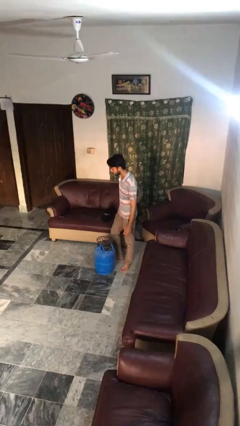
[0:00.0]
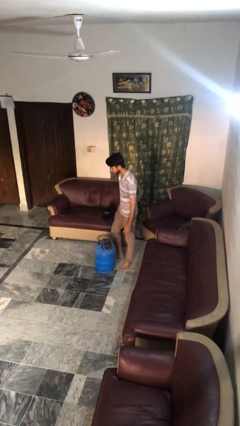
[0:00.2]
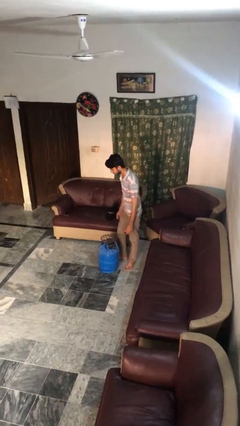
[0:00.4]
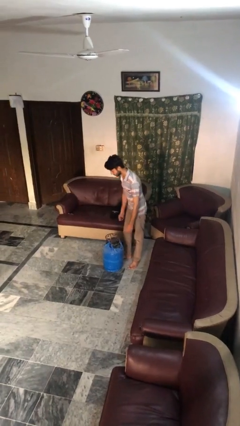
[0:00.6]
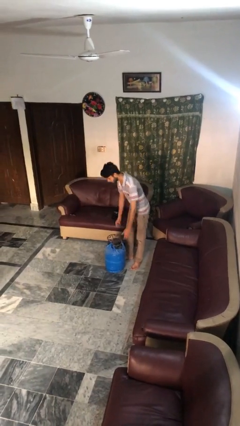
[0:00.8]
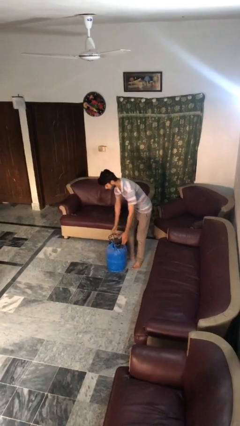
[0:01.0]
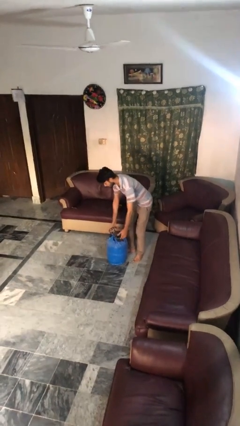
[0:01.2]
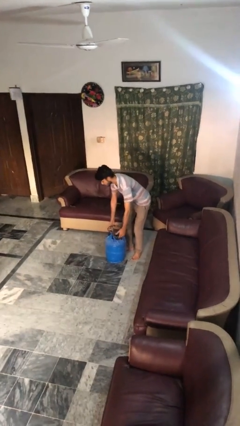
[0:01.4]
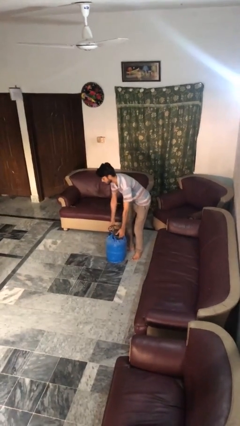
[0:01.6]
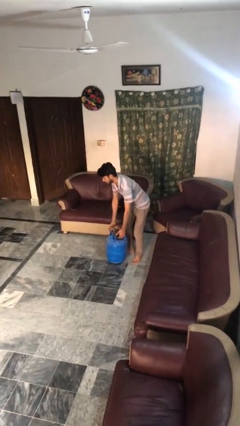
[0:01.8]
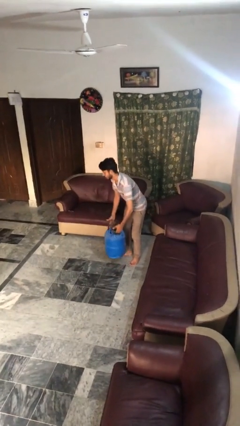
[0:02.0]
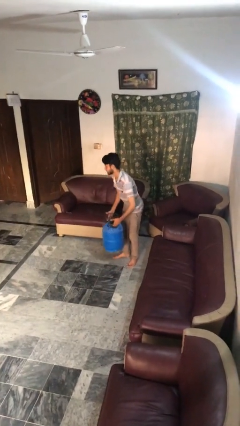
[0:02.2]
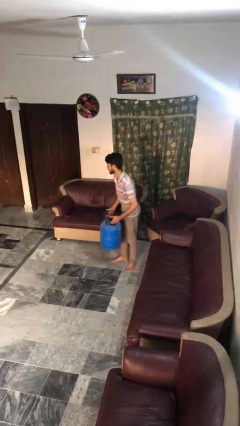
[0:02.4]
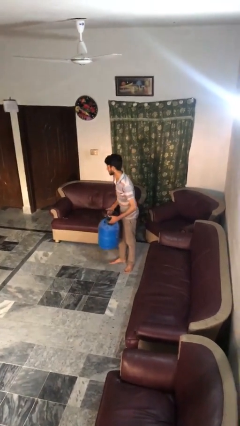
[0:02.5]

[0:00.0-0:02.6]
person picks up object from floor

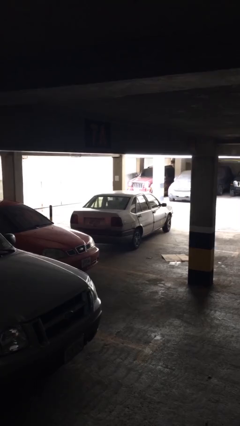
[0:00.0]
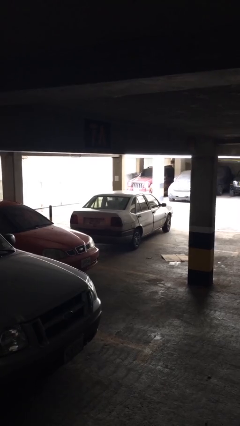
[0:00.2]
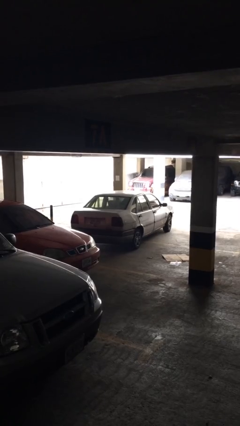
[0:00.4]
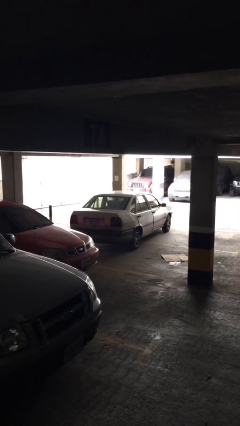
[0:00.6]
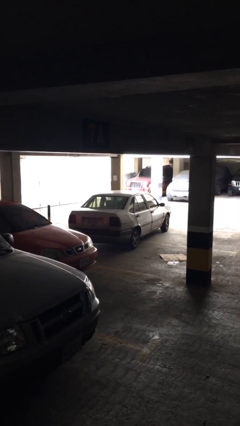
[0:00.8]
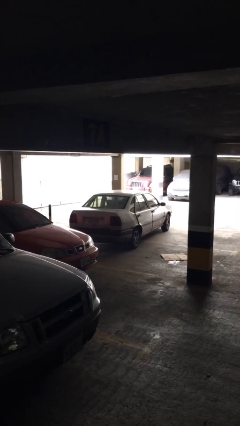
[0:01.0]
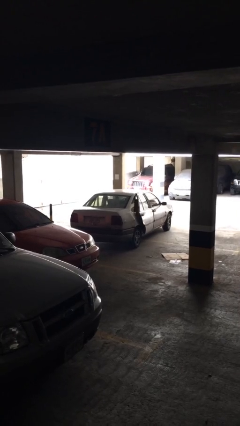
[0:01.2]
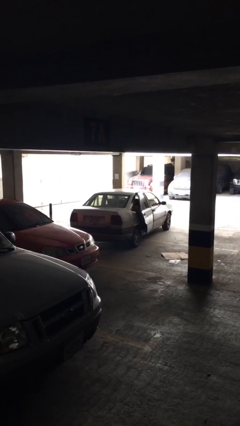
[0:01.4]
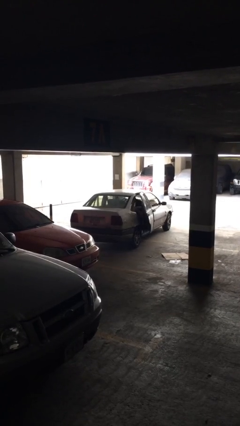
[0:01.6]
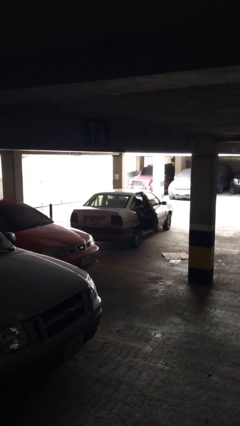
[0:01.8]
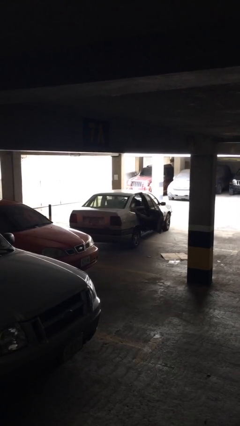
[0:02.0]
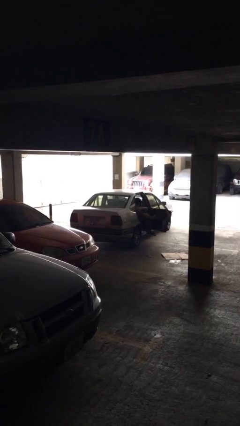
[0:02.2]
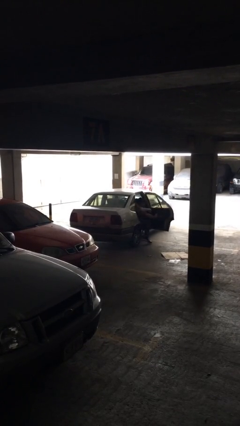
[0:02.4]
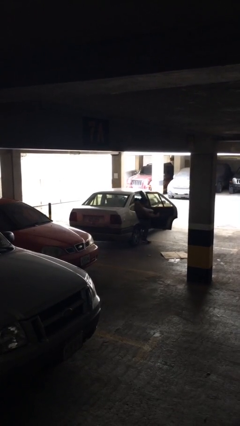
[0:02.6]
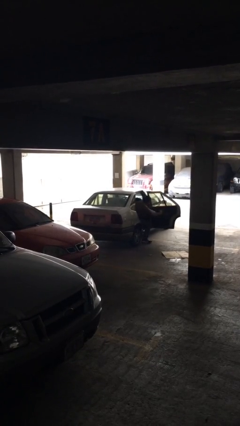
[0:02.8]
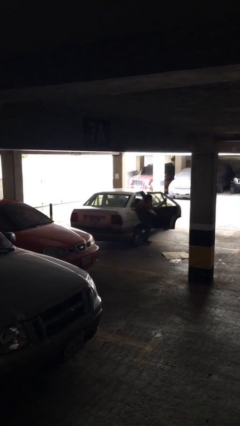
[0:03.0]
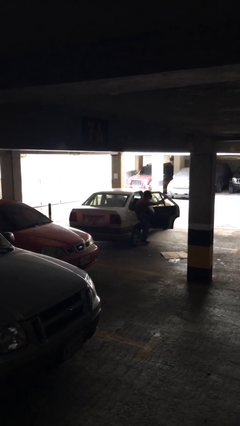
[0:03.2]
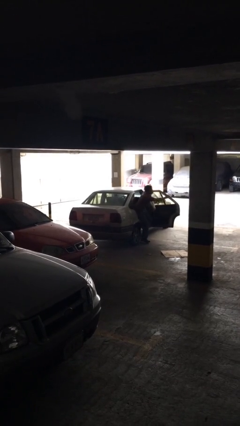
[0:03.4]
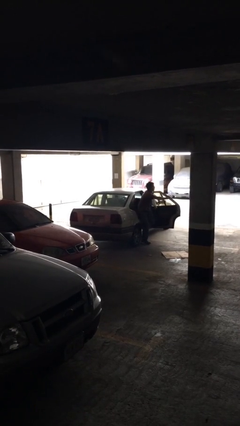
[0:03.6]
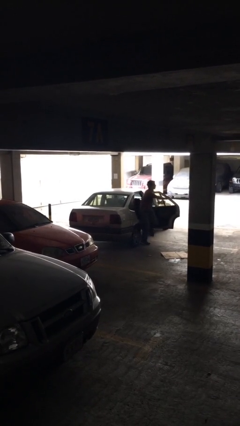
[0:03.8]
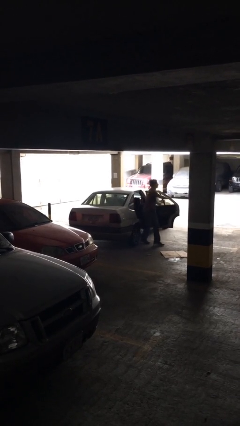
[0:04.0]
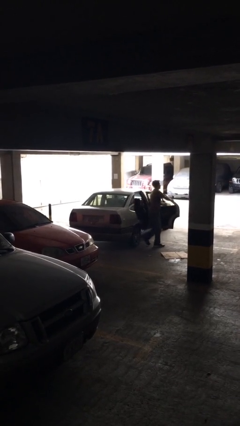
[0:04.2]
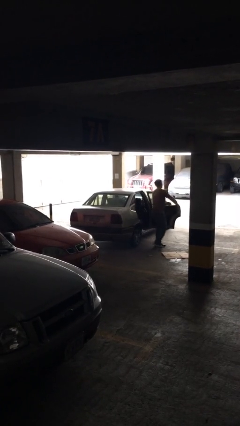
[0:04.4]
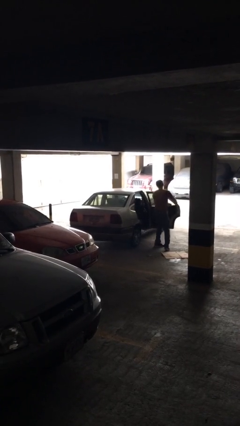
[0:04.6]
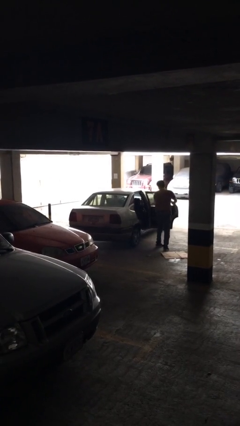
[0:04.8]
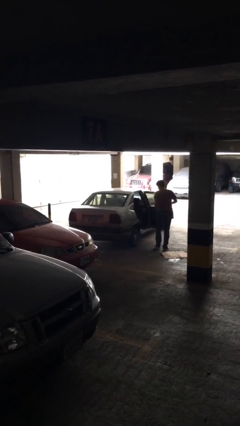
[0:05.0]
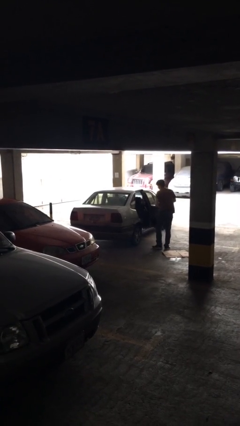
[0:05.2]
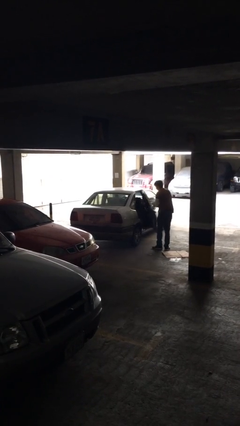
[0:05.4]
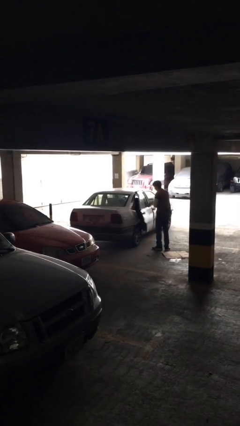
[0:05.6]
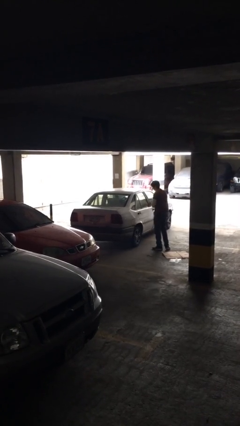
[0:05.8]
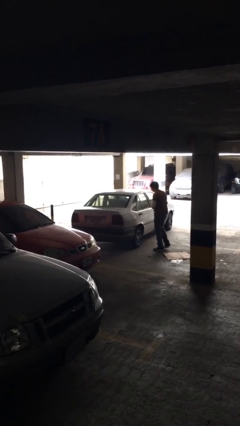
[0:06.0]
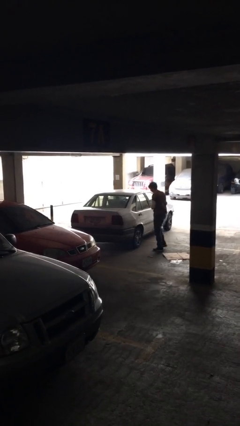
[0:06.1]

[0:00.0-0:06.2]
car drops off person

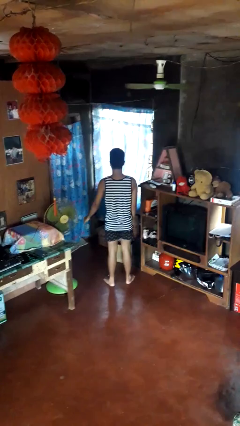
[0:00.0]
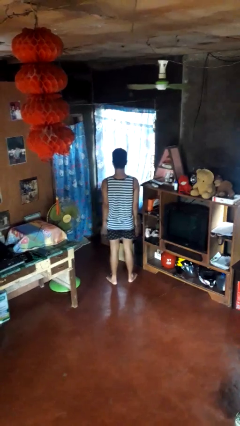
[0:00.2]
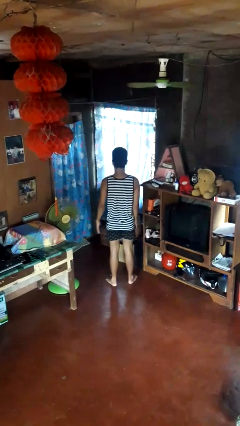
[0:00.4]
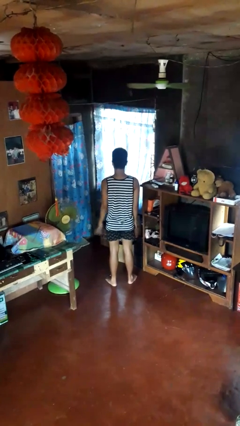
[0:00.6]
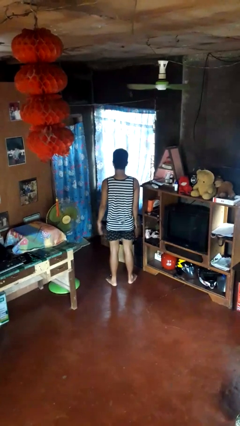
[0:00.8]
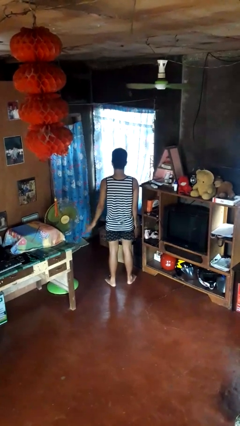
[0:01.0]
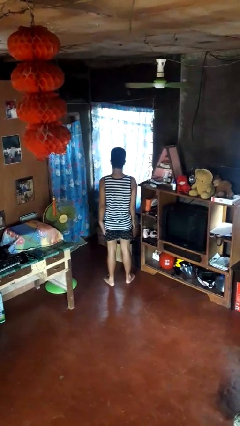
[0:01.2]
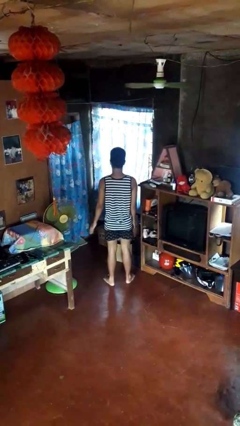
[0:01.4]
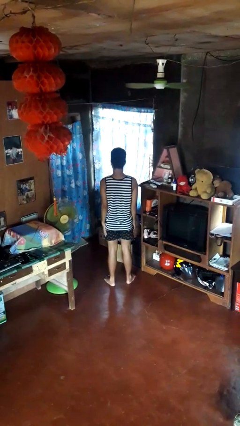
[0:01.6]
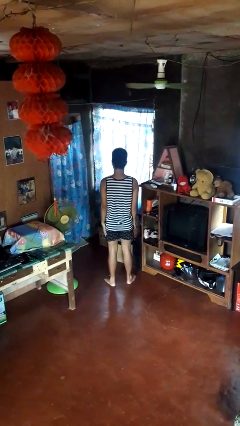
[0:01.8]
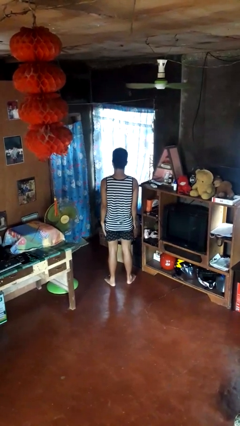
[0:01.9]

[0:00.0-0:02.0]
person slaps hands on thighs

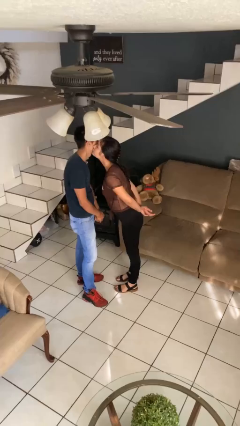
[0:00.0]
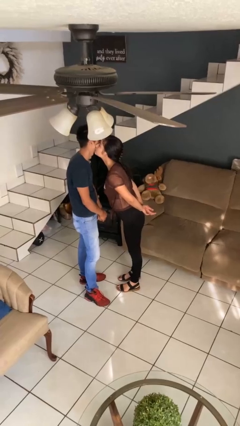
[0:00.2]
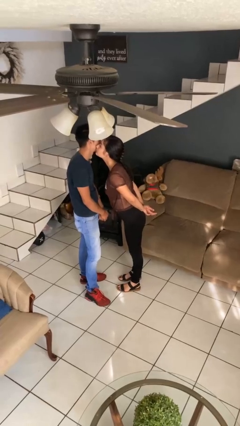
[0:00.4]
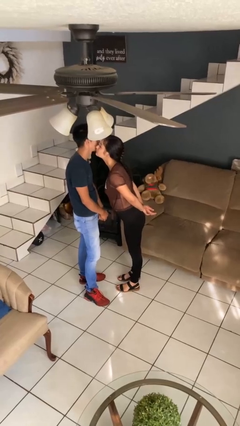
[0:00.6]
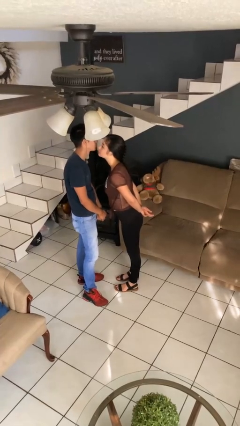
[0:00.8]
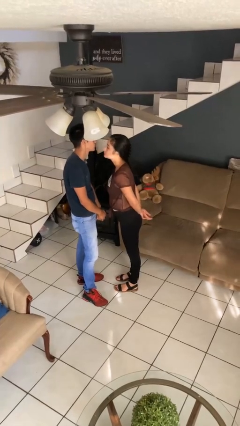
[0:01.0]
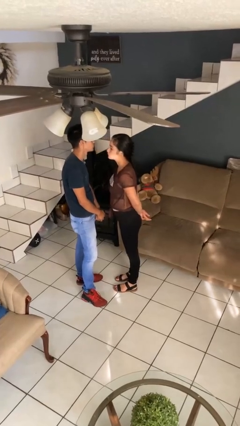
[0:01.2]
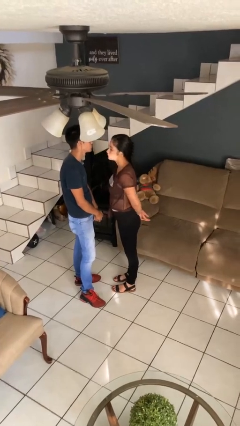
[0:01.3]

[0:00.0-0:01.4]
person kisses cheek of person

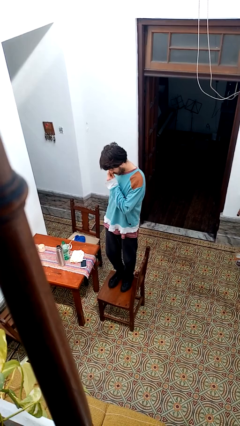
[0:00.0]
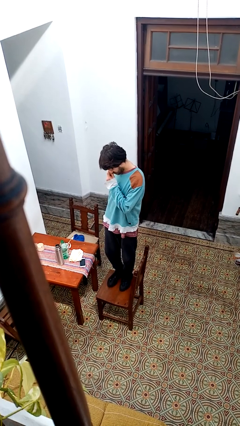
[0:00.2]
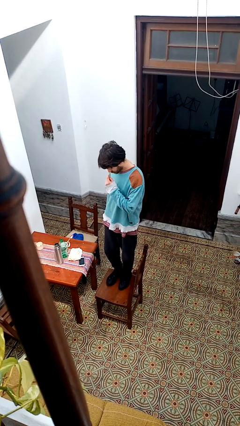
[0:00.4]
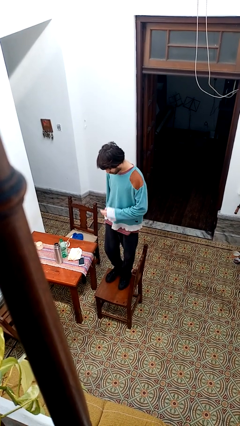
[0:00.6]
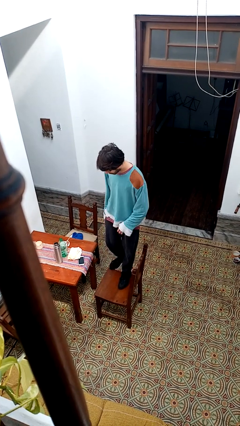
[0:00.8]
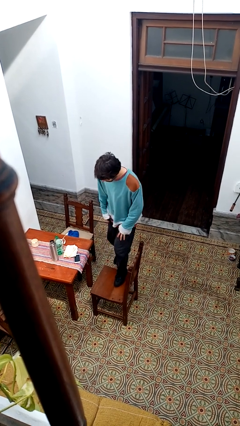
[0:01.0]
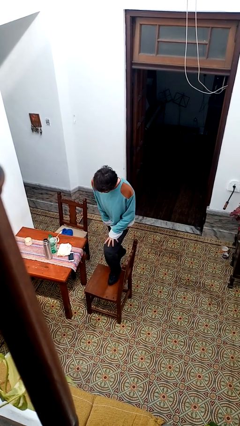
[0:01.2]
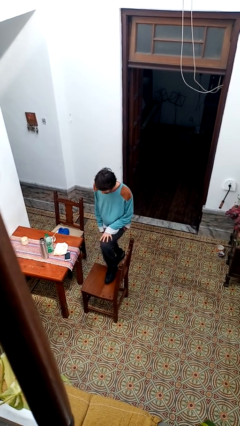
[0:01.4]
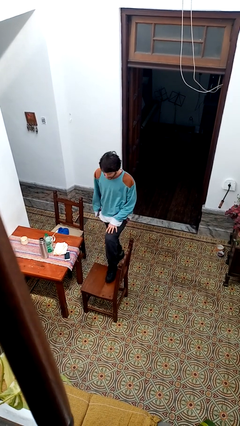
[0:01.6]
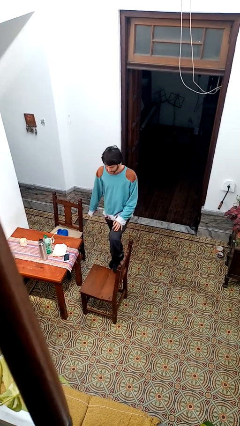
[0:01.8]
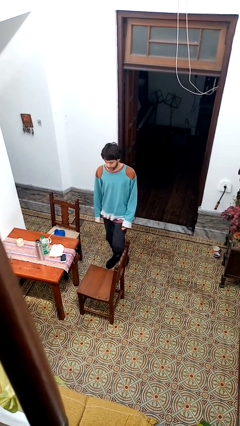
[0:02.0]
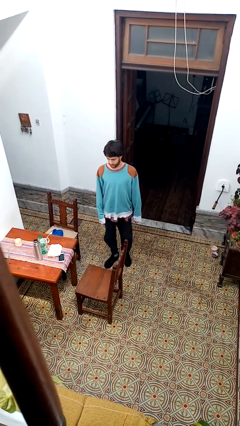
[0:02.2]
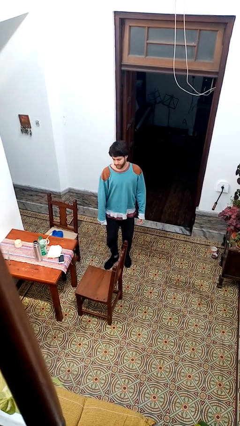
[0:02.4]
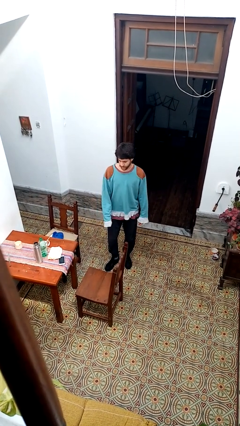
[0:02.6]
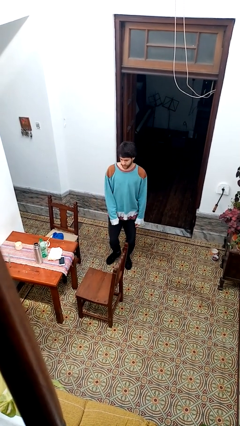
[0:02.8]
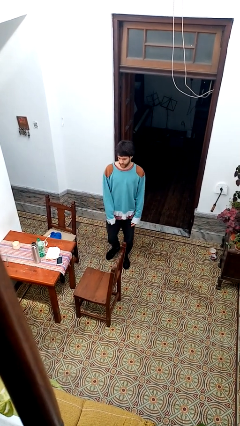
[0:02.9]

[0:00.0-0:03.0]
person climbs off chair

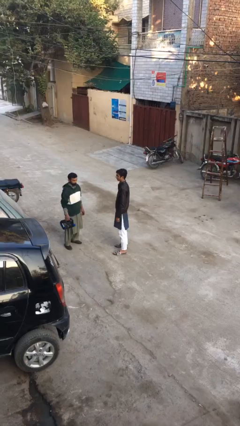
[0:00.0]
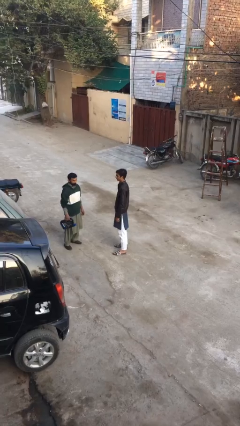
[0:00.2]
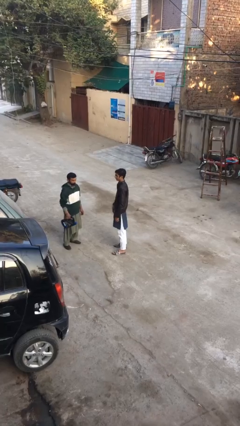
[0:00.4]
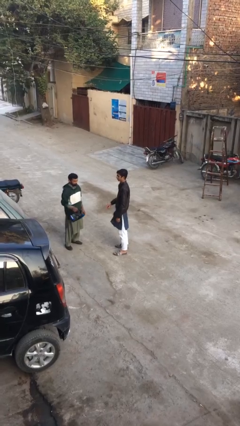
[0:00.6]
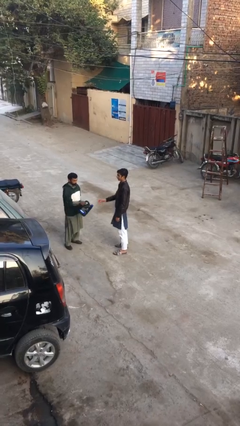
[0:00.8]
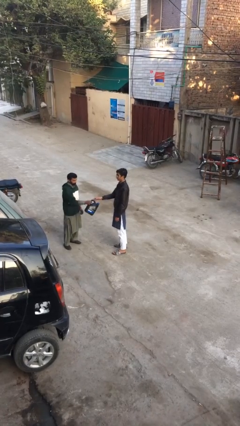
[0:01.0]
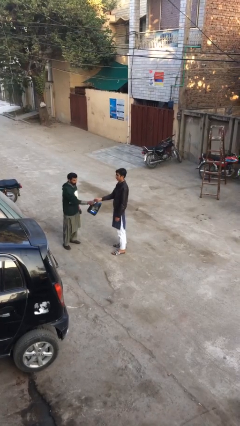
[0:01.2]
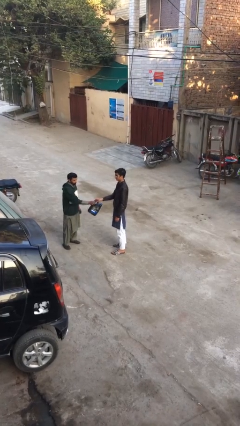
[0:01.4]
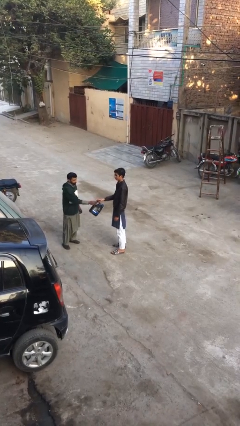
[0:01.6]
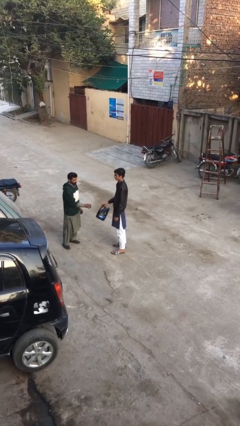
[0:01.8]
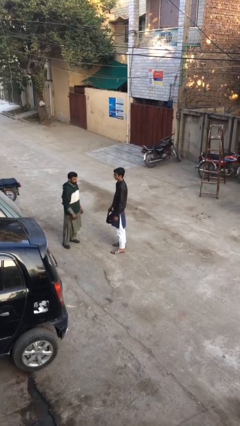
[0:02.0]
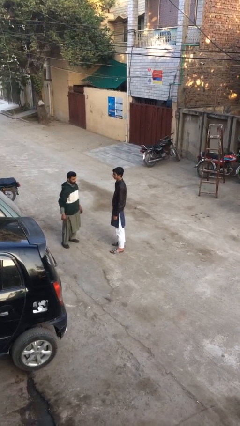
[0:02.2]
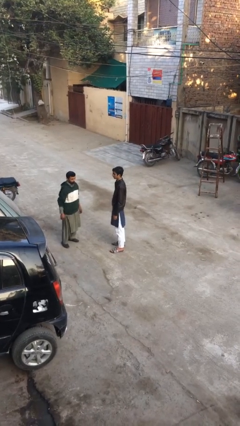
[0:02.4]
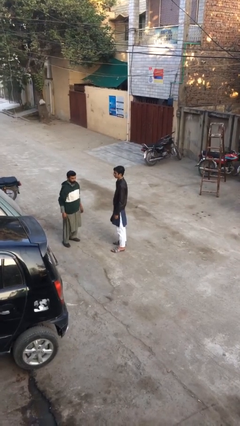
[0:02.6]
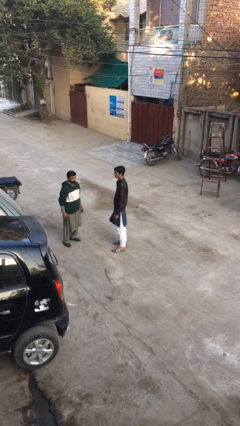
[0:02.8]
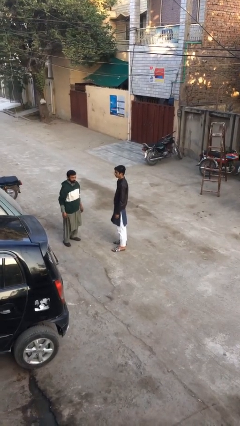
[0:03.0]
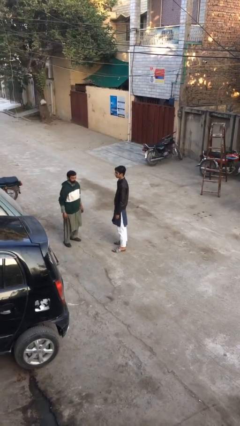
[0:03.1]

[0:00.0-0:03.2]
person transfers object to person
